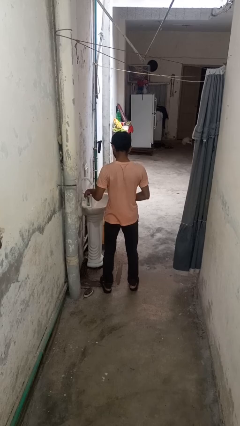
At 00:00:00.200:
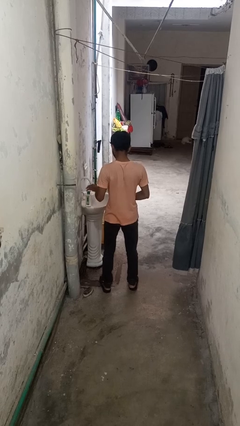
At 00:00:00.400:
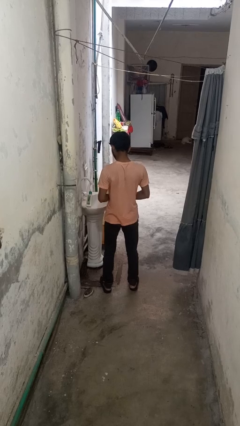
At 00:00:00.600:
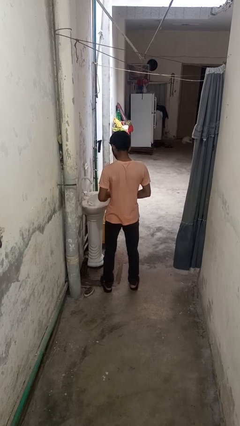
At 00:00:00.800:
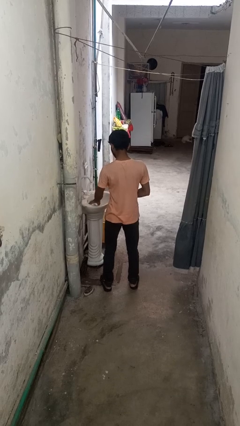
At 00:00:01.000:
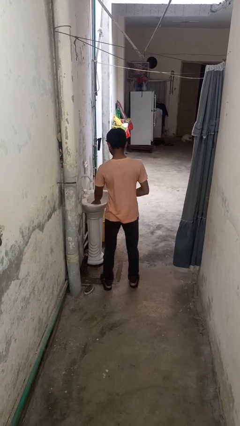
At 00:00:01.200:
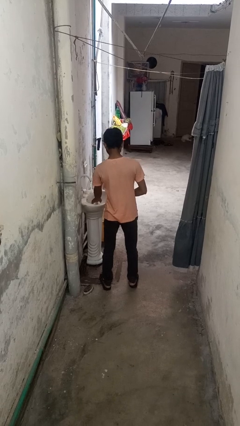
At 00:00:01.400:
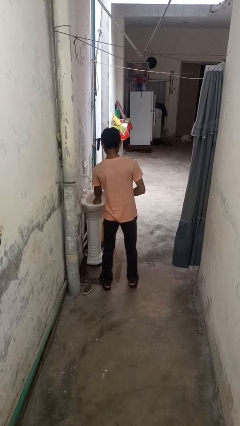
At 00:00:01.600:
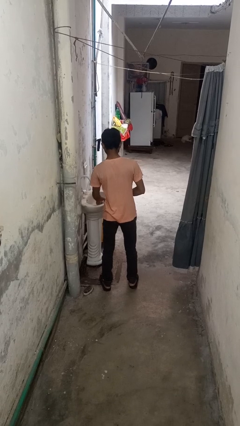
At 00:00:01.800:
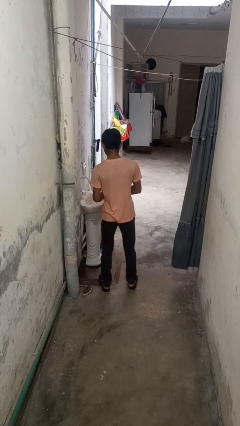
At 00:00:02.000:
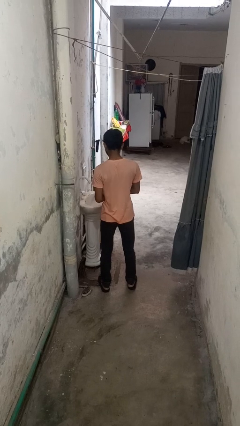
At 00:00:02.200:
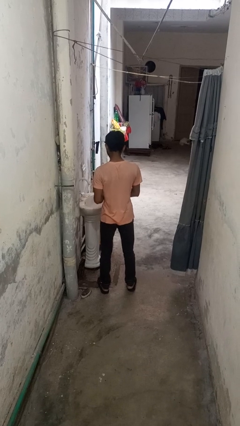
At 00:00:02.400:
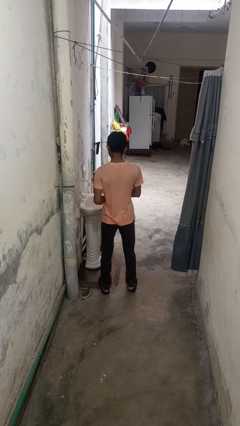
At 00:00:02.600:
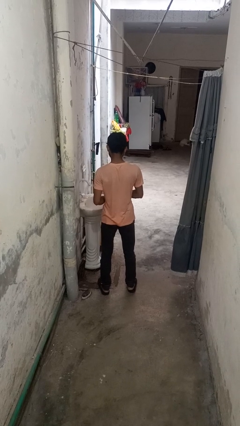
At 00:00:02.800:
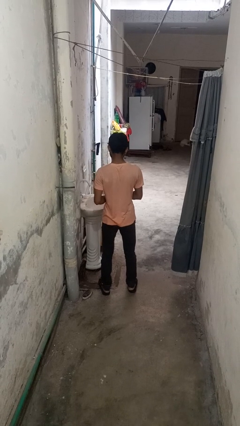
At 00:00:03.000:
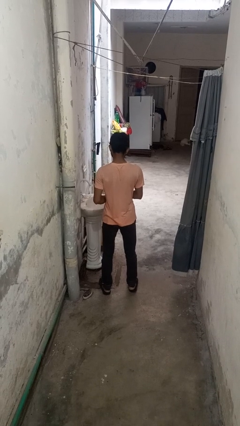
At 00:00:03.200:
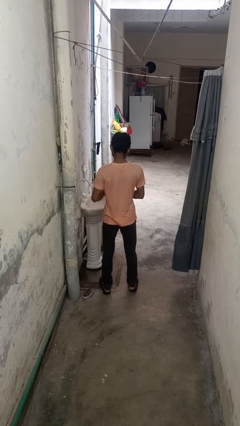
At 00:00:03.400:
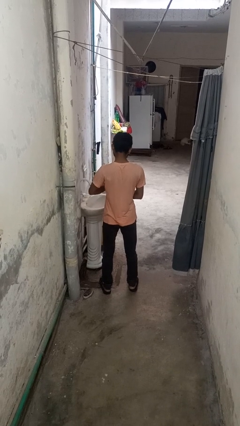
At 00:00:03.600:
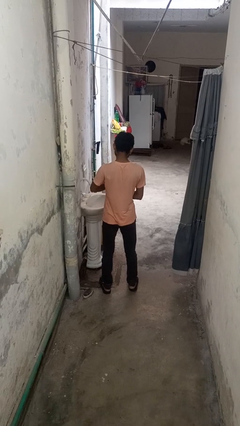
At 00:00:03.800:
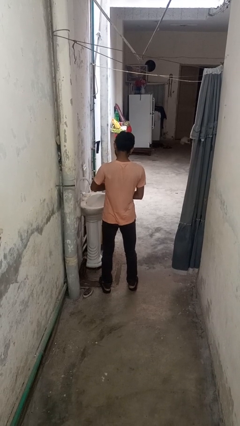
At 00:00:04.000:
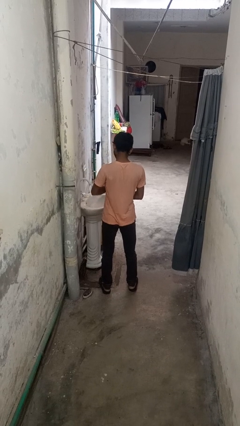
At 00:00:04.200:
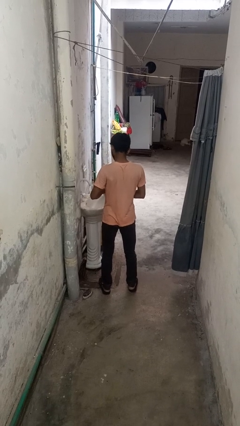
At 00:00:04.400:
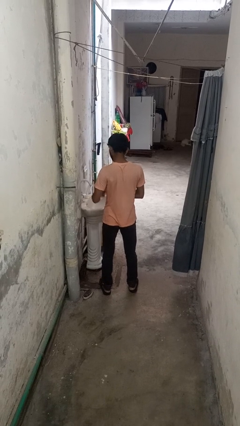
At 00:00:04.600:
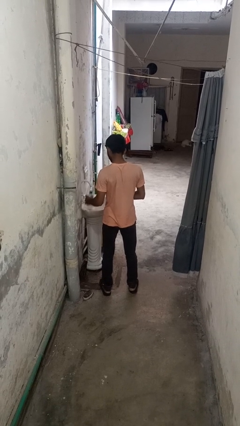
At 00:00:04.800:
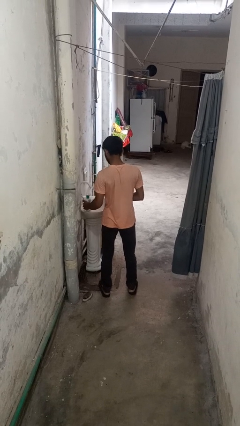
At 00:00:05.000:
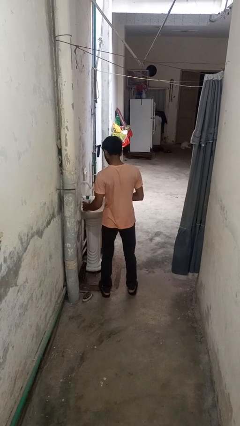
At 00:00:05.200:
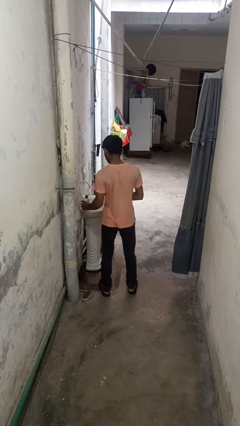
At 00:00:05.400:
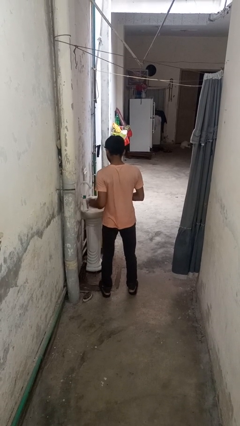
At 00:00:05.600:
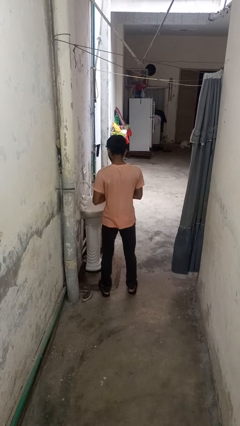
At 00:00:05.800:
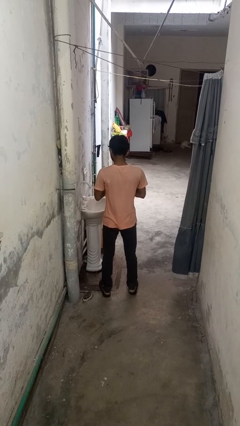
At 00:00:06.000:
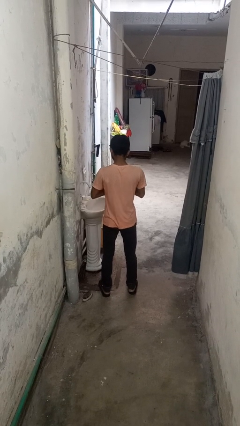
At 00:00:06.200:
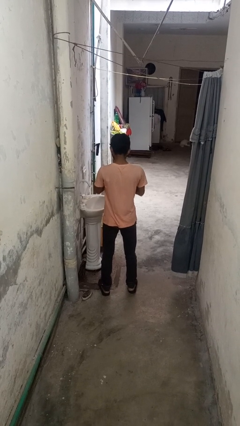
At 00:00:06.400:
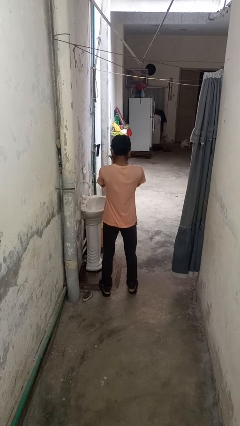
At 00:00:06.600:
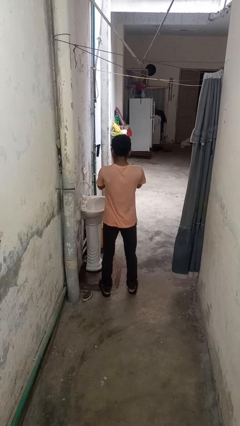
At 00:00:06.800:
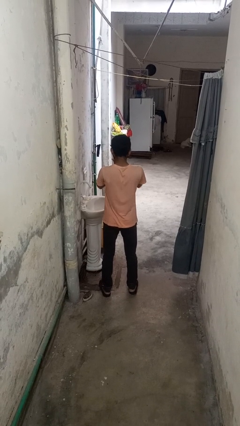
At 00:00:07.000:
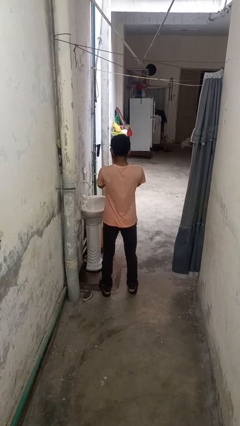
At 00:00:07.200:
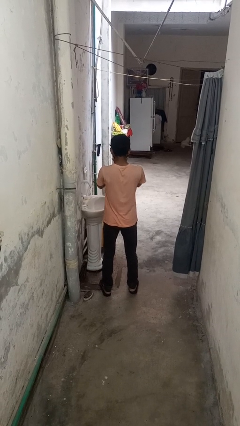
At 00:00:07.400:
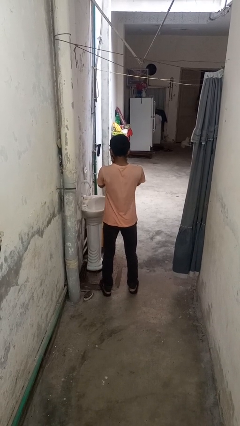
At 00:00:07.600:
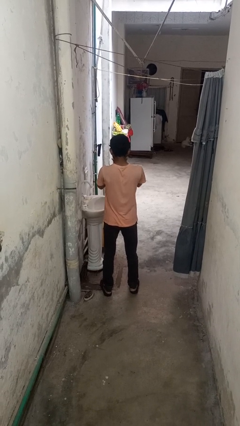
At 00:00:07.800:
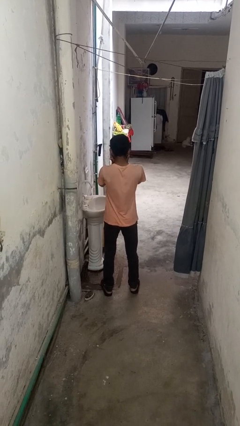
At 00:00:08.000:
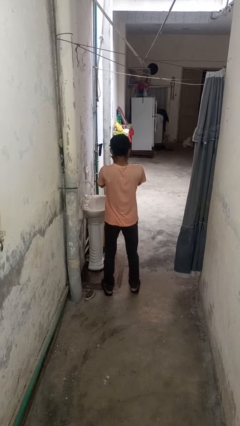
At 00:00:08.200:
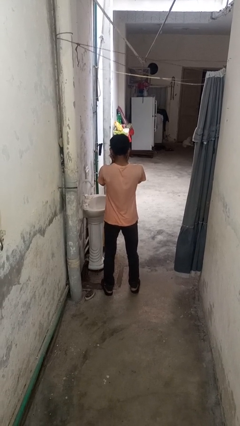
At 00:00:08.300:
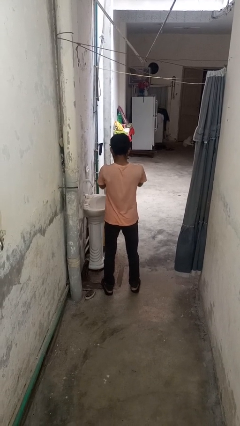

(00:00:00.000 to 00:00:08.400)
person applies sunscreen

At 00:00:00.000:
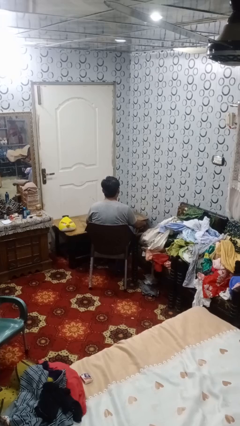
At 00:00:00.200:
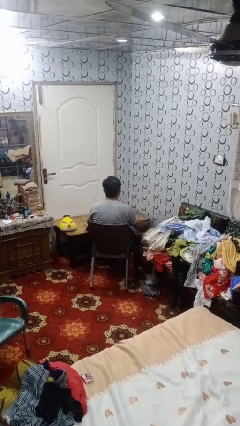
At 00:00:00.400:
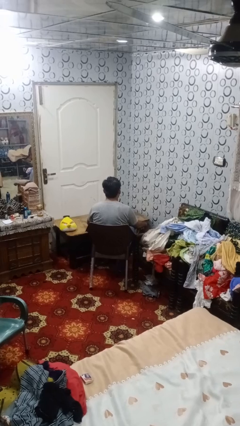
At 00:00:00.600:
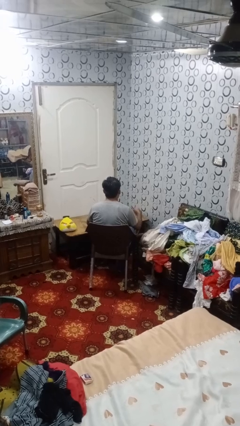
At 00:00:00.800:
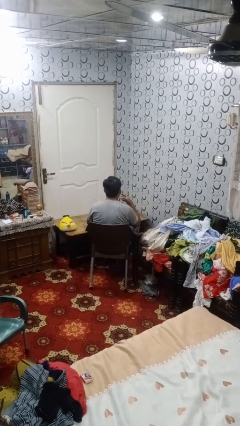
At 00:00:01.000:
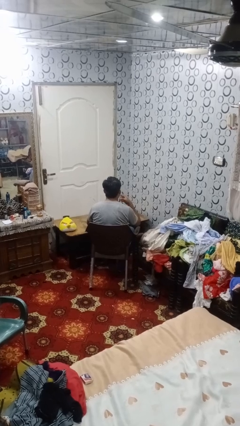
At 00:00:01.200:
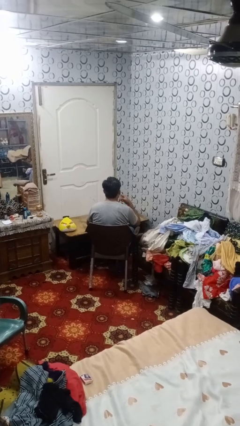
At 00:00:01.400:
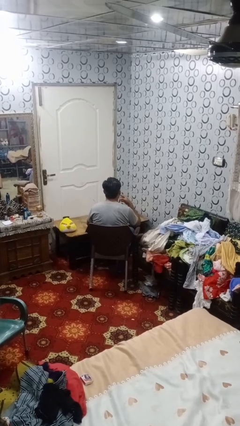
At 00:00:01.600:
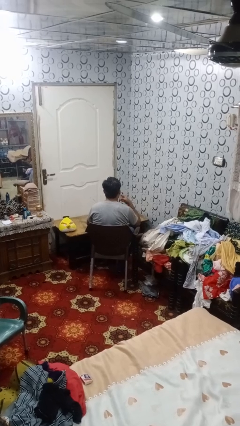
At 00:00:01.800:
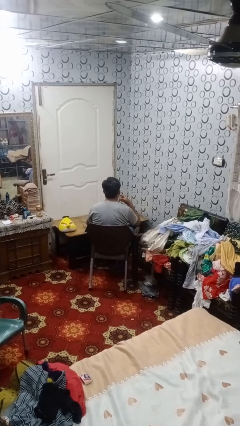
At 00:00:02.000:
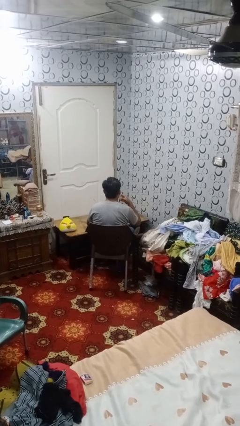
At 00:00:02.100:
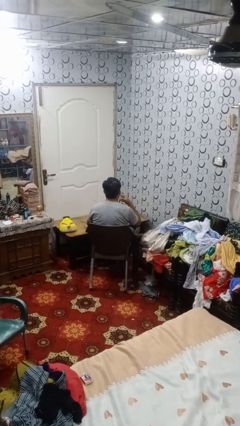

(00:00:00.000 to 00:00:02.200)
person licks fingers

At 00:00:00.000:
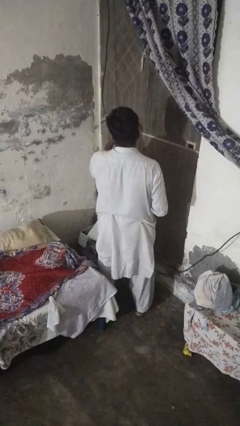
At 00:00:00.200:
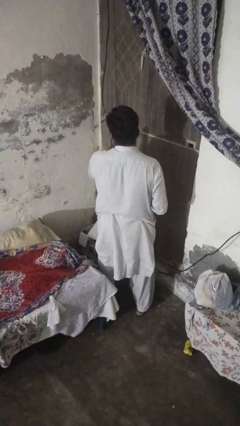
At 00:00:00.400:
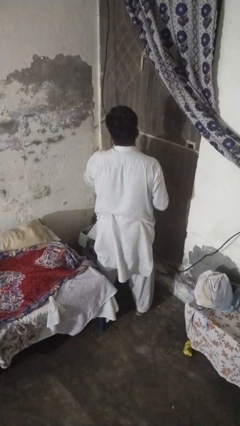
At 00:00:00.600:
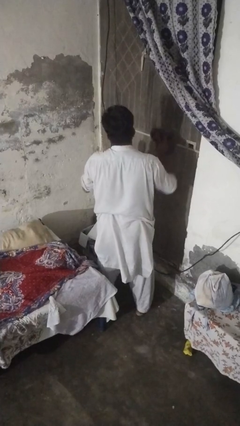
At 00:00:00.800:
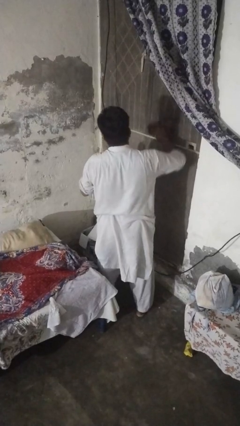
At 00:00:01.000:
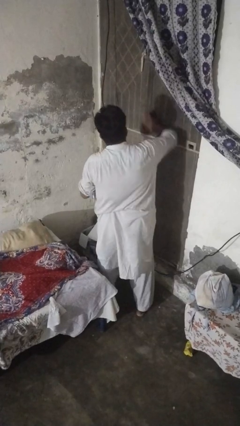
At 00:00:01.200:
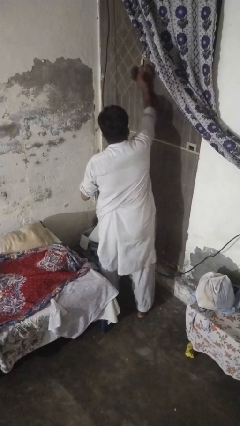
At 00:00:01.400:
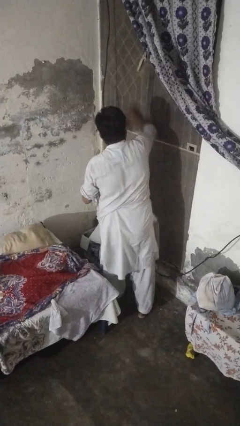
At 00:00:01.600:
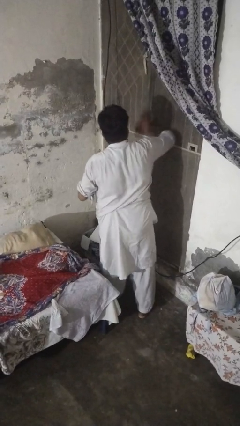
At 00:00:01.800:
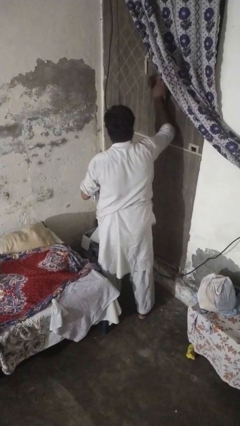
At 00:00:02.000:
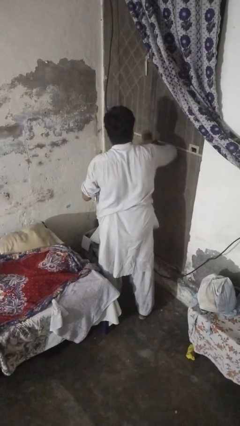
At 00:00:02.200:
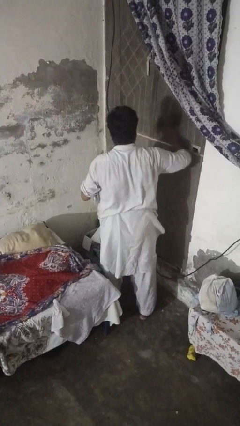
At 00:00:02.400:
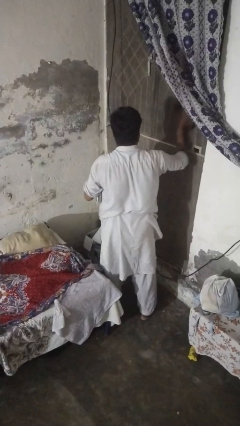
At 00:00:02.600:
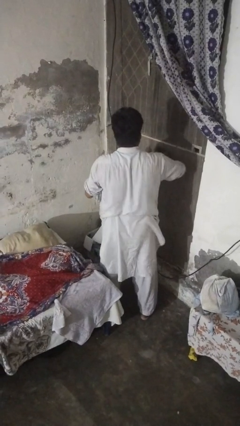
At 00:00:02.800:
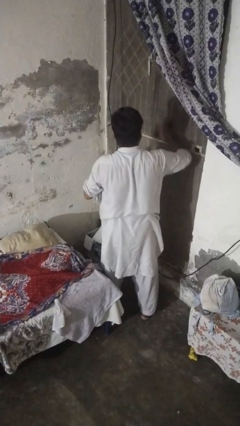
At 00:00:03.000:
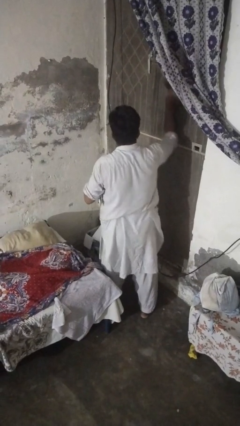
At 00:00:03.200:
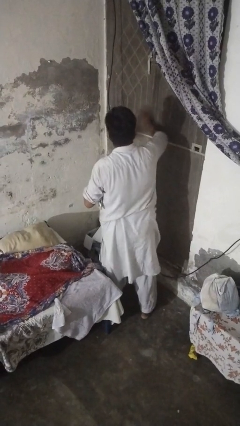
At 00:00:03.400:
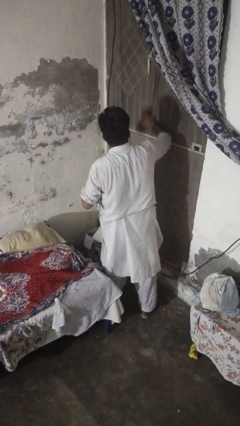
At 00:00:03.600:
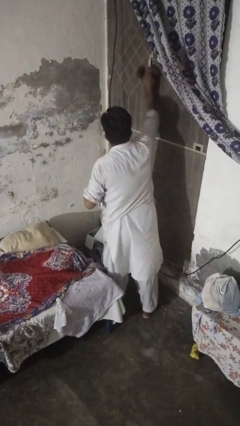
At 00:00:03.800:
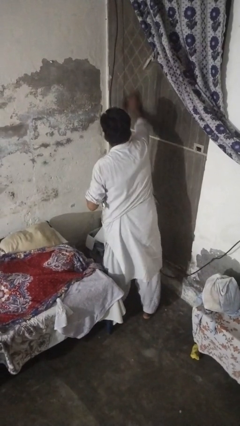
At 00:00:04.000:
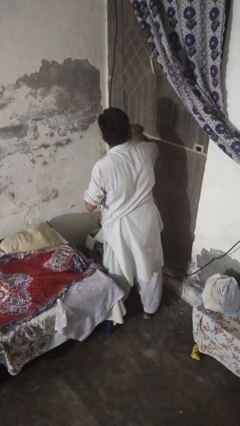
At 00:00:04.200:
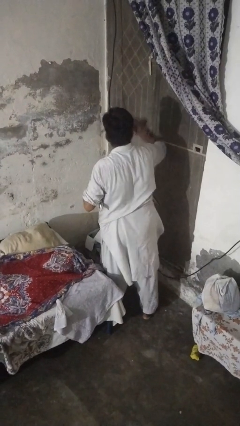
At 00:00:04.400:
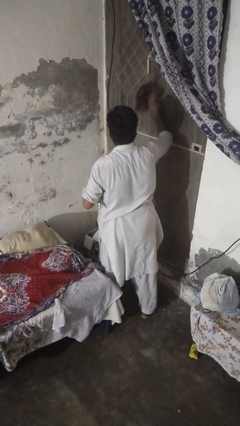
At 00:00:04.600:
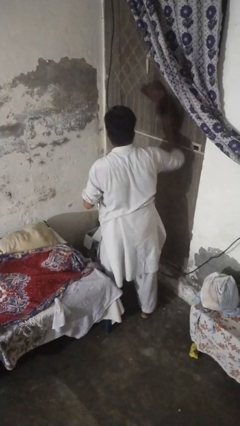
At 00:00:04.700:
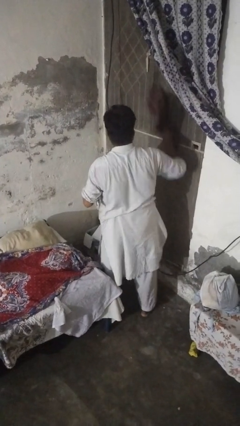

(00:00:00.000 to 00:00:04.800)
person washes window

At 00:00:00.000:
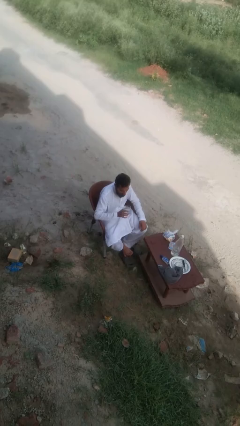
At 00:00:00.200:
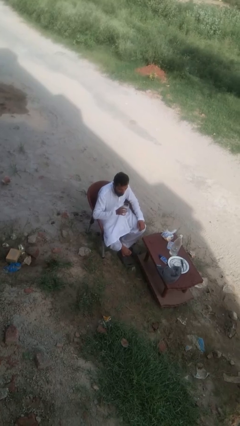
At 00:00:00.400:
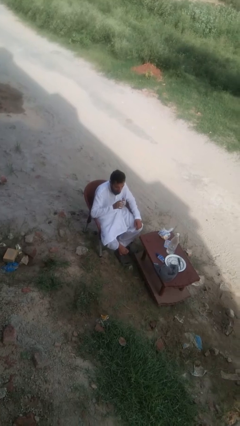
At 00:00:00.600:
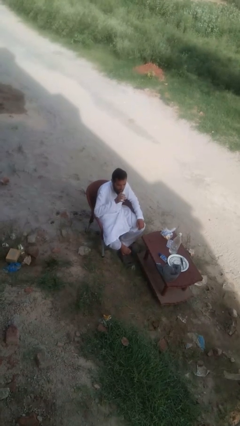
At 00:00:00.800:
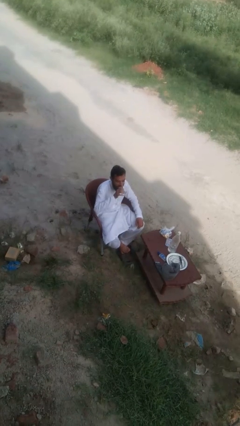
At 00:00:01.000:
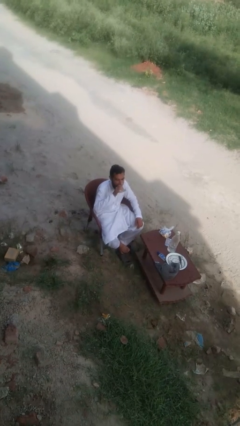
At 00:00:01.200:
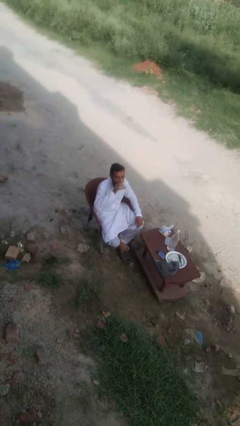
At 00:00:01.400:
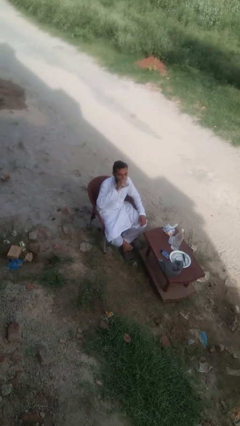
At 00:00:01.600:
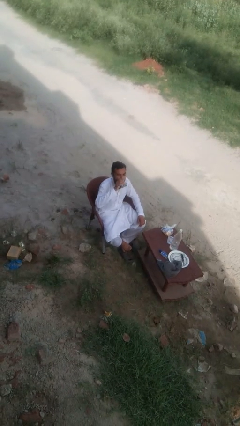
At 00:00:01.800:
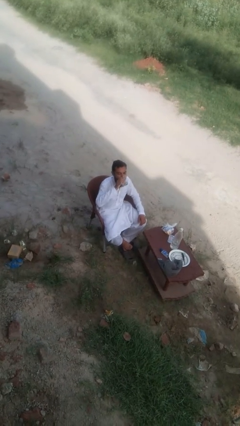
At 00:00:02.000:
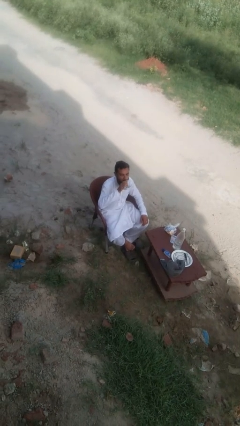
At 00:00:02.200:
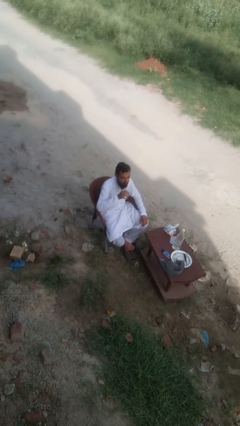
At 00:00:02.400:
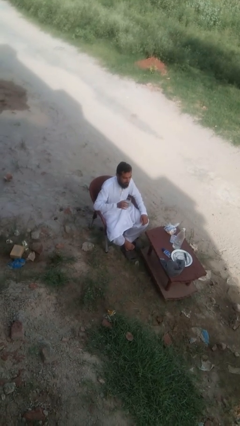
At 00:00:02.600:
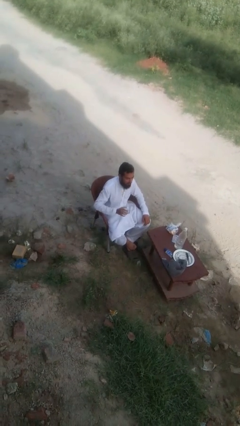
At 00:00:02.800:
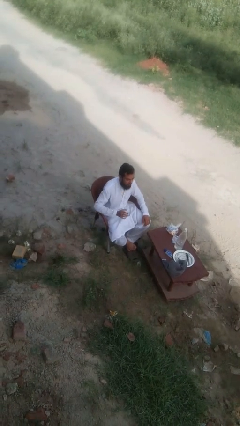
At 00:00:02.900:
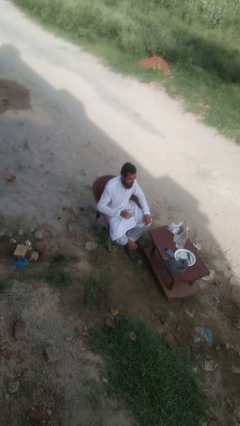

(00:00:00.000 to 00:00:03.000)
person drinks from shotglass
